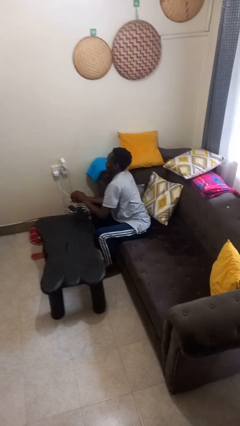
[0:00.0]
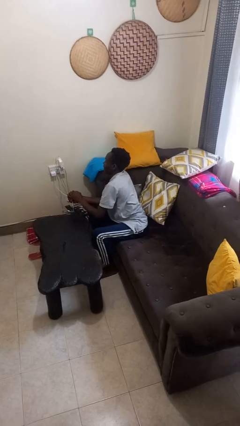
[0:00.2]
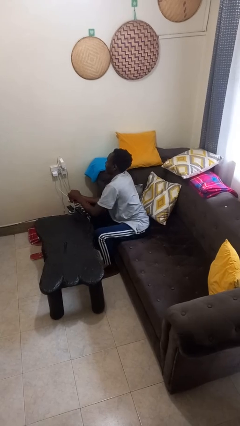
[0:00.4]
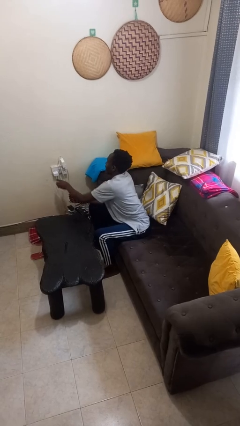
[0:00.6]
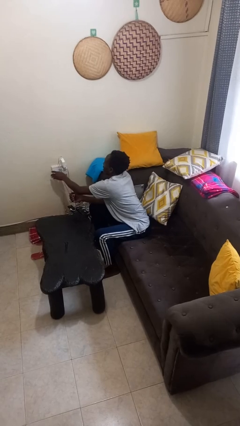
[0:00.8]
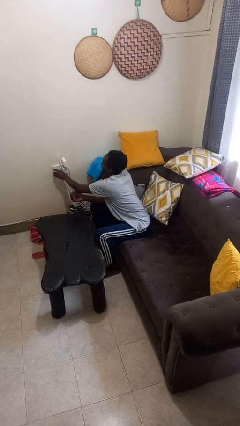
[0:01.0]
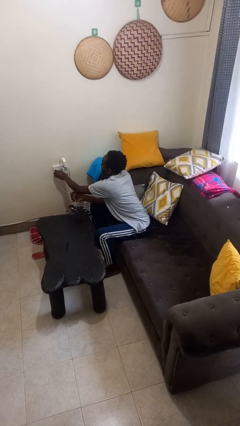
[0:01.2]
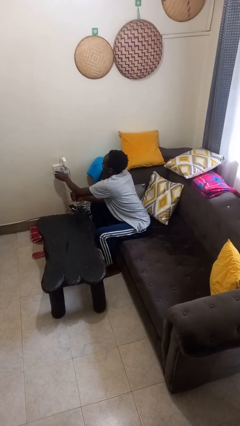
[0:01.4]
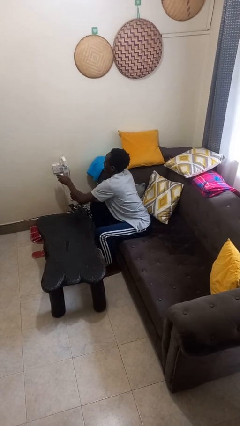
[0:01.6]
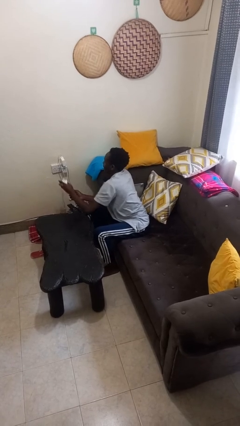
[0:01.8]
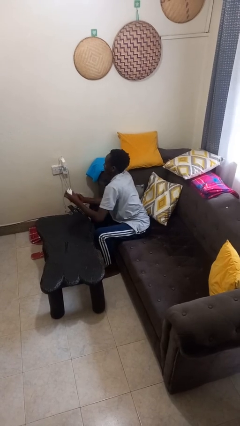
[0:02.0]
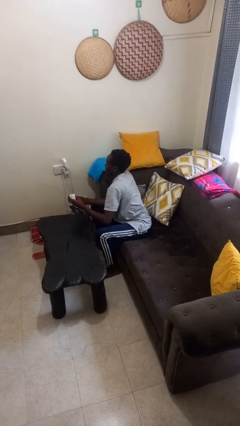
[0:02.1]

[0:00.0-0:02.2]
person unplugs from electrical socket

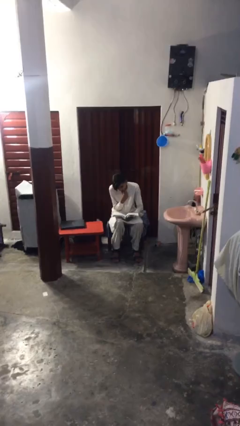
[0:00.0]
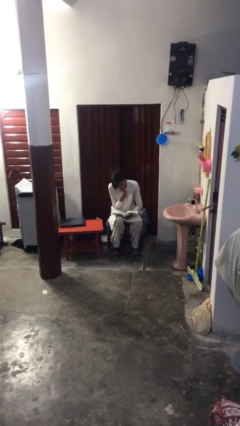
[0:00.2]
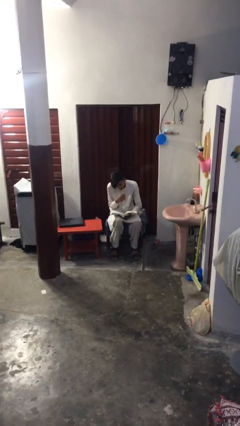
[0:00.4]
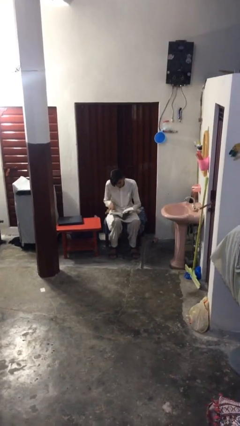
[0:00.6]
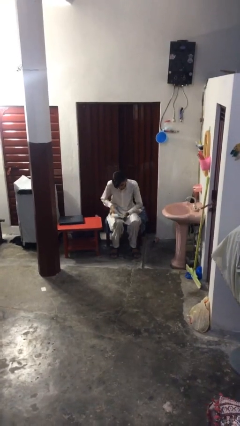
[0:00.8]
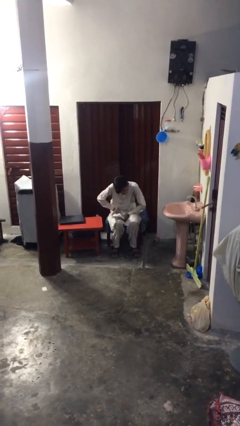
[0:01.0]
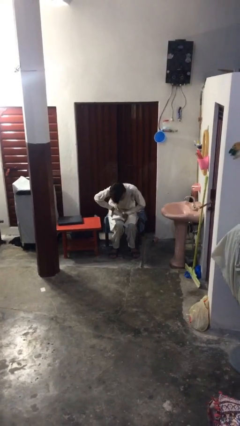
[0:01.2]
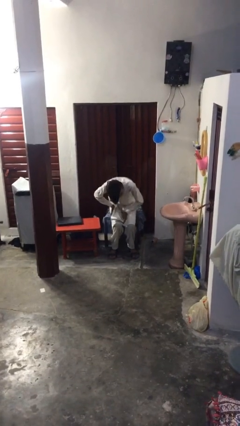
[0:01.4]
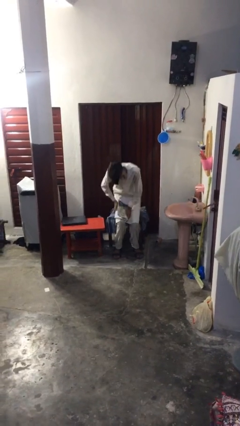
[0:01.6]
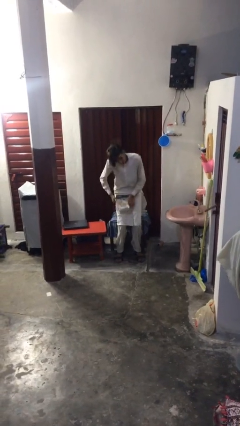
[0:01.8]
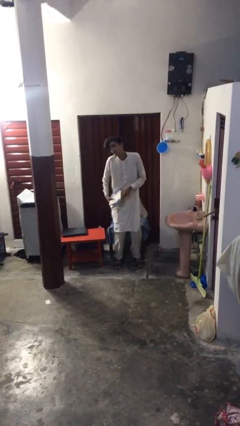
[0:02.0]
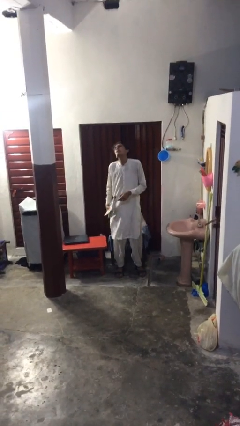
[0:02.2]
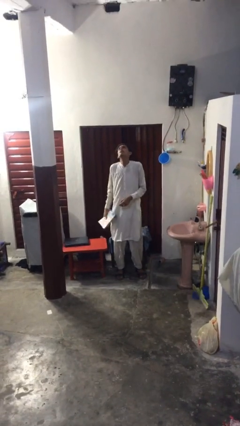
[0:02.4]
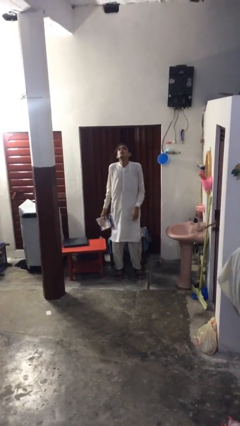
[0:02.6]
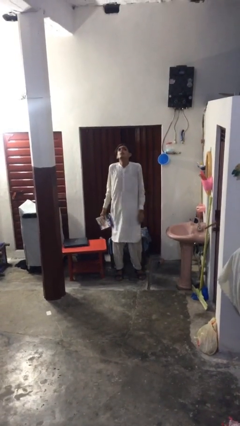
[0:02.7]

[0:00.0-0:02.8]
person stands up

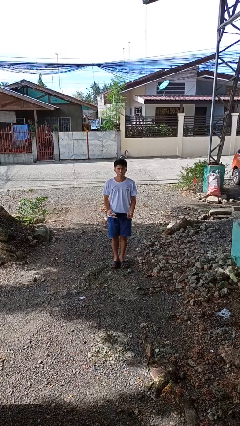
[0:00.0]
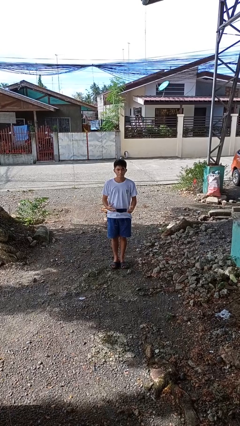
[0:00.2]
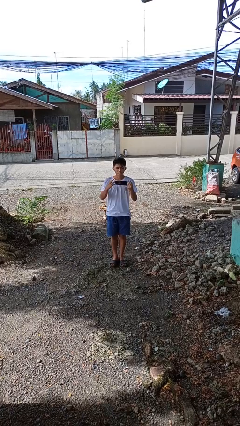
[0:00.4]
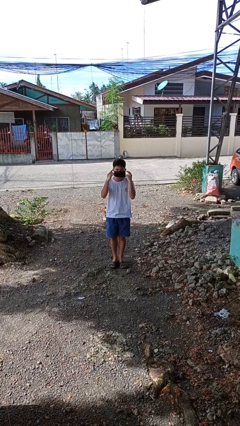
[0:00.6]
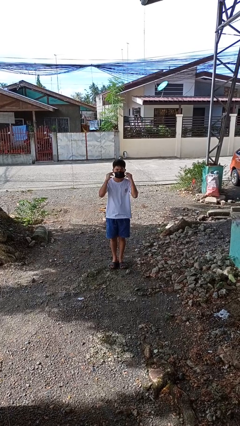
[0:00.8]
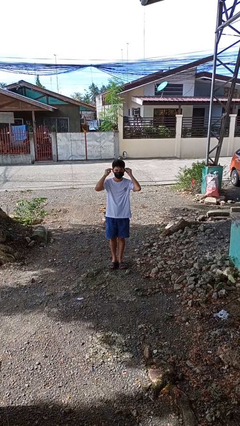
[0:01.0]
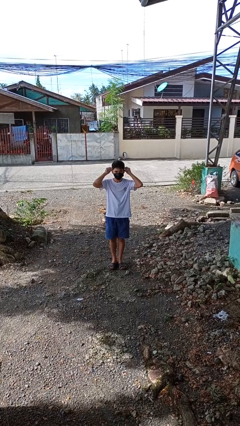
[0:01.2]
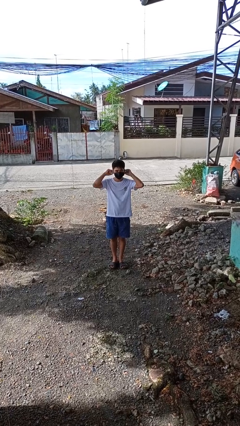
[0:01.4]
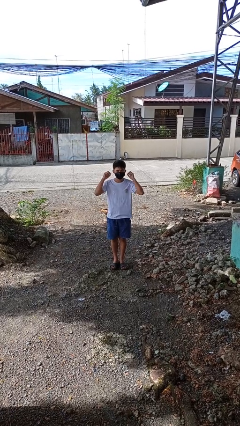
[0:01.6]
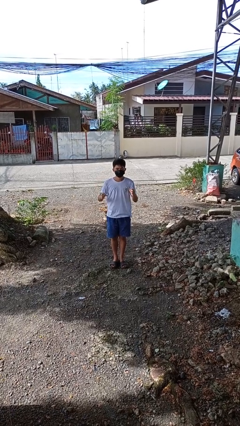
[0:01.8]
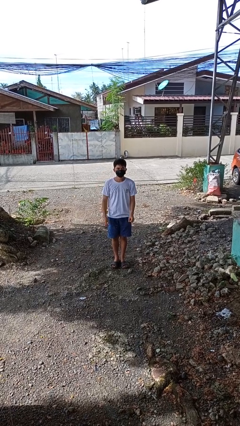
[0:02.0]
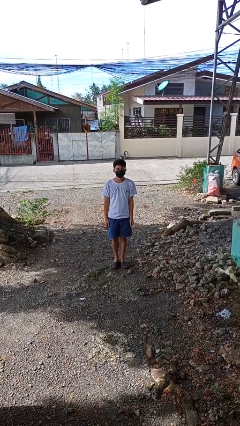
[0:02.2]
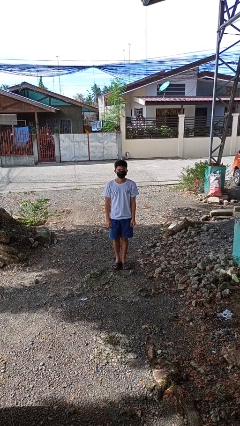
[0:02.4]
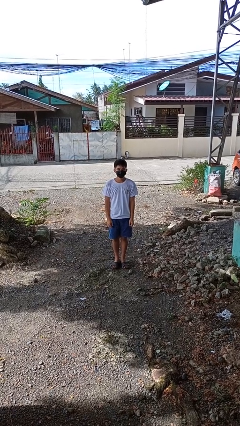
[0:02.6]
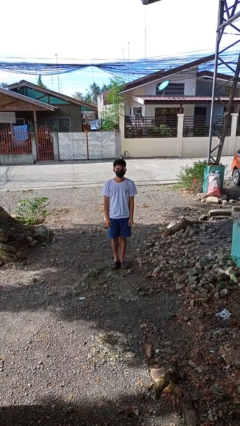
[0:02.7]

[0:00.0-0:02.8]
person puts on facemask

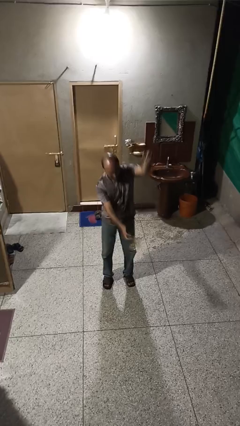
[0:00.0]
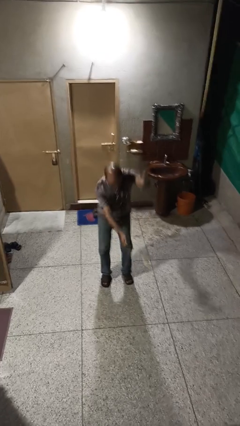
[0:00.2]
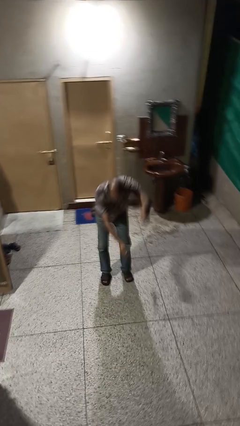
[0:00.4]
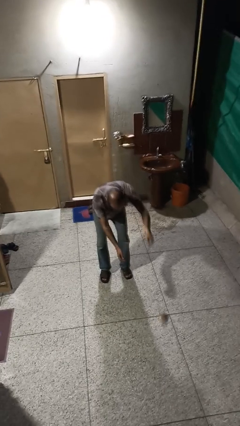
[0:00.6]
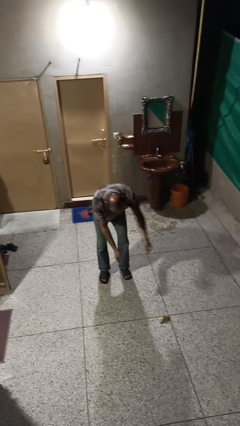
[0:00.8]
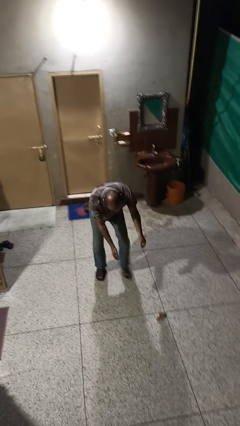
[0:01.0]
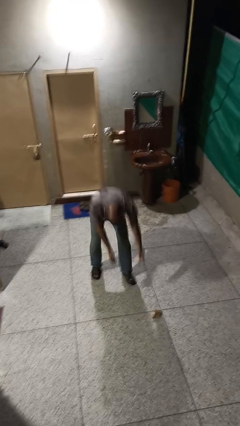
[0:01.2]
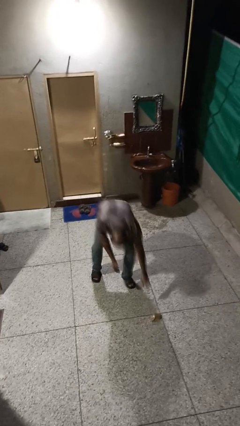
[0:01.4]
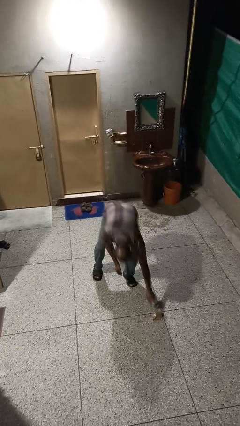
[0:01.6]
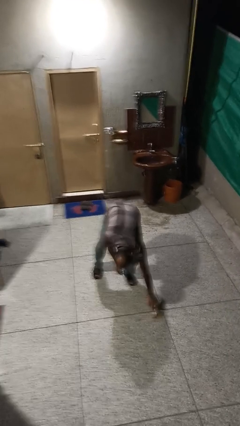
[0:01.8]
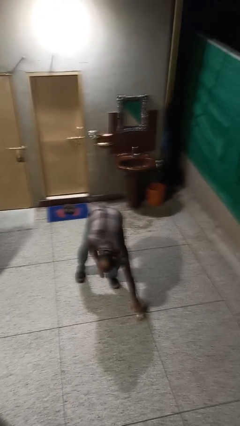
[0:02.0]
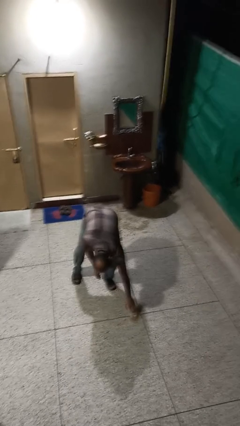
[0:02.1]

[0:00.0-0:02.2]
person catches dropped object

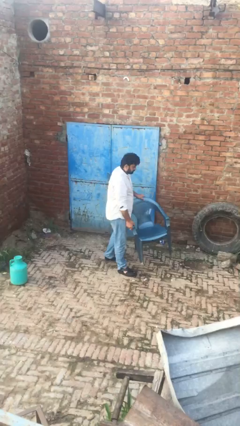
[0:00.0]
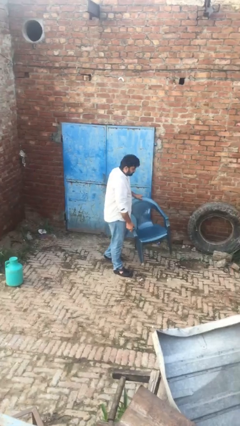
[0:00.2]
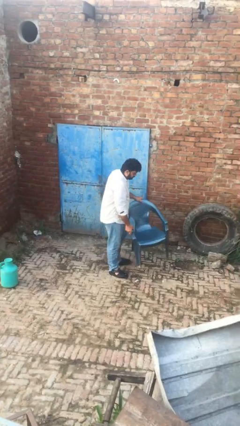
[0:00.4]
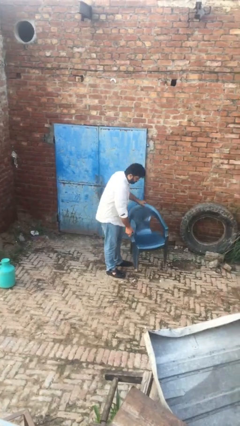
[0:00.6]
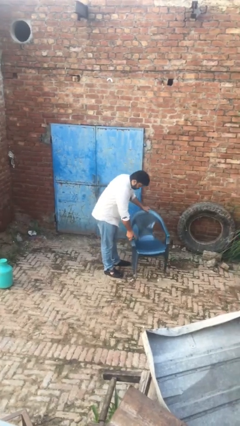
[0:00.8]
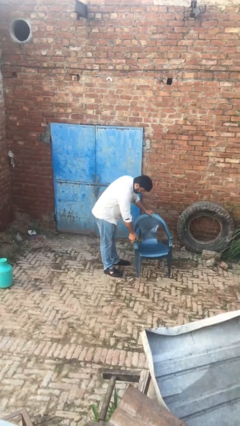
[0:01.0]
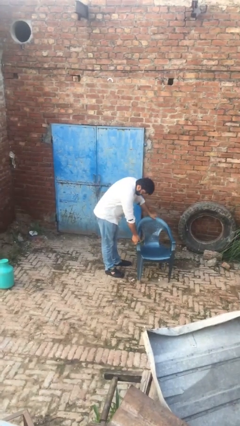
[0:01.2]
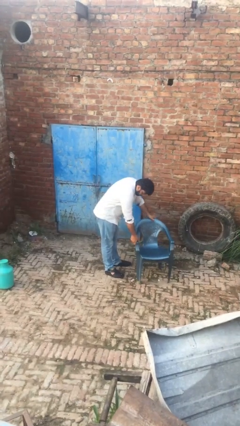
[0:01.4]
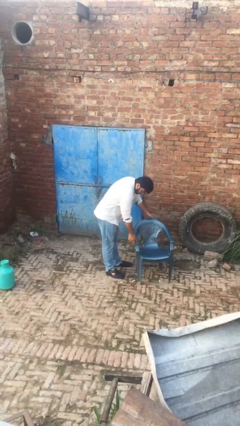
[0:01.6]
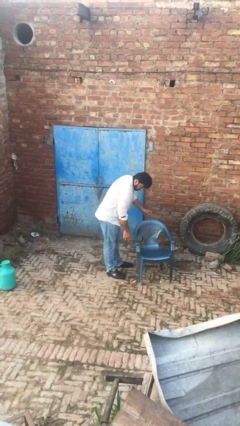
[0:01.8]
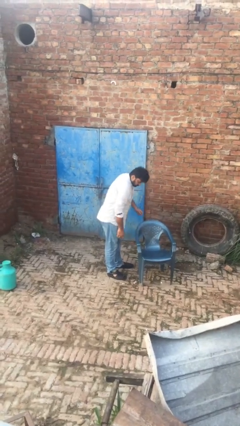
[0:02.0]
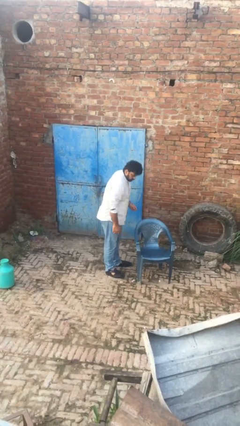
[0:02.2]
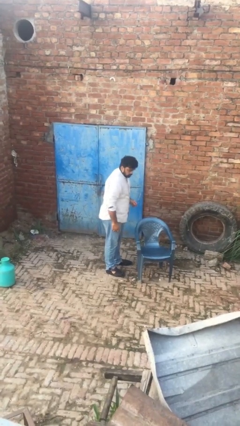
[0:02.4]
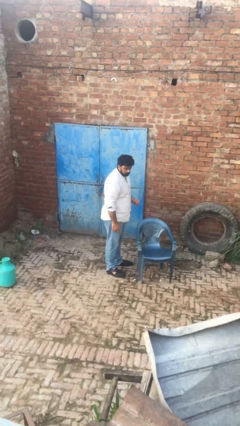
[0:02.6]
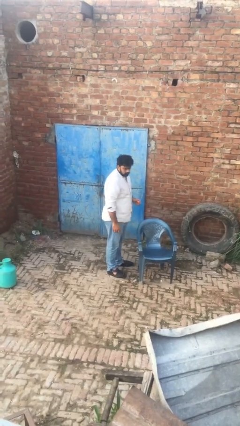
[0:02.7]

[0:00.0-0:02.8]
person puts down object on floor

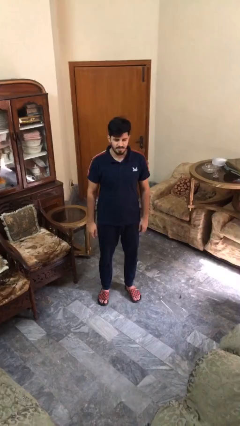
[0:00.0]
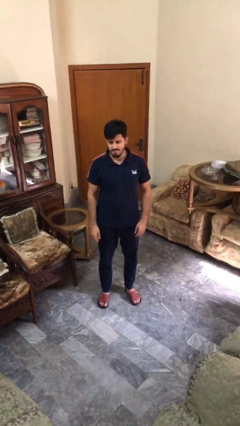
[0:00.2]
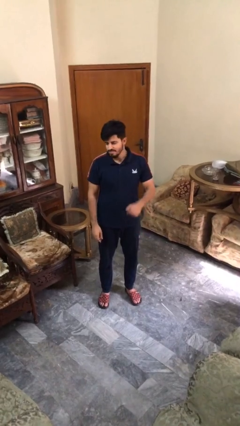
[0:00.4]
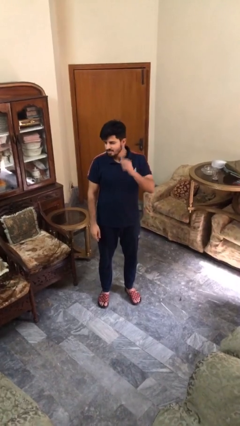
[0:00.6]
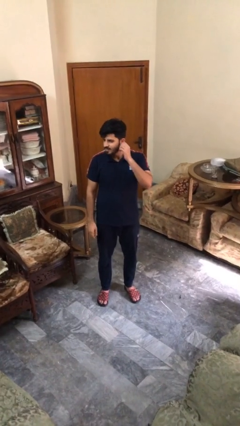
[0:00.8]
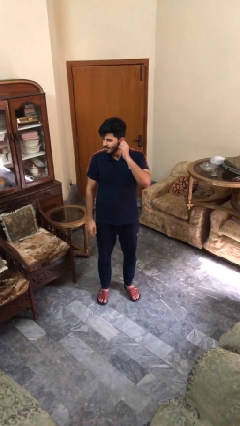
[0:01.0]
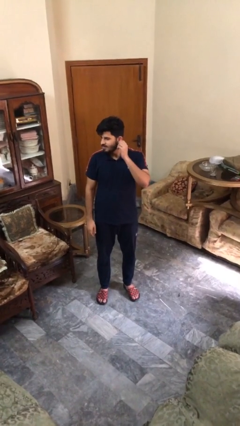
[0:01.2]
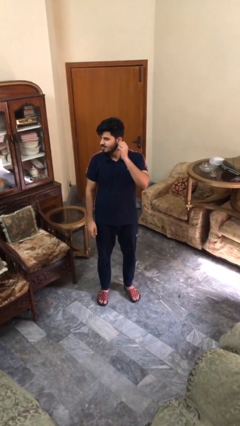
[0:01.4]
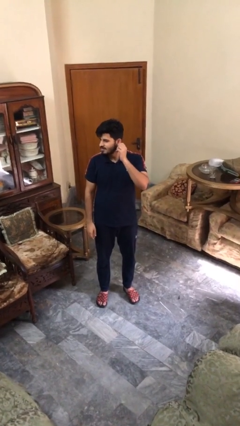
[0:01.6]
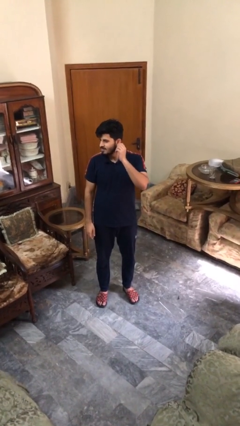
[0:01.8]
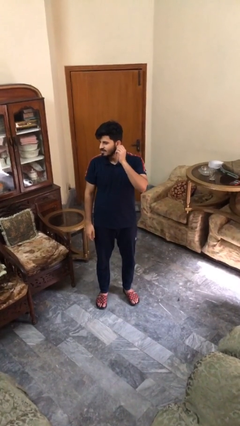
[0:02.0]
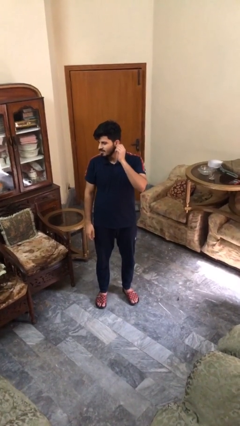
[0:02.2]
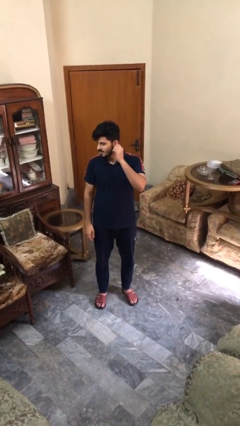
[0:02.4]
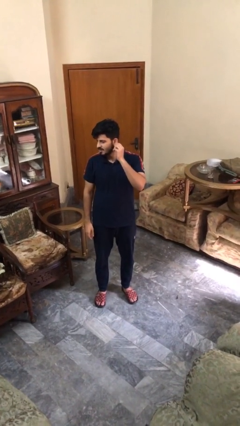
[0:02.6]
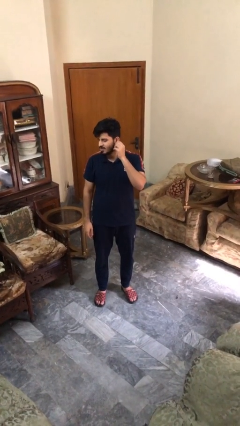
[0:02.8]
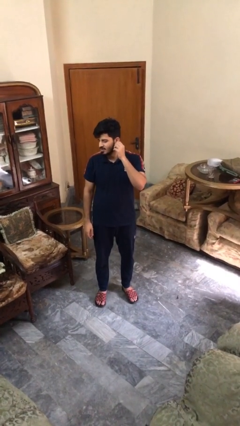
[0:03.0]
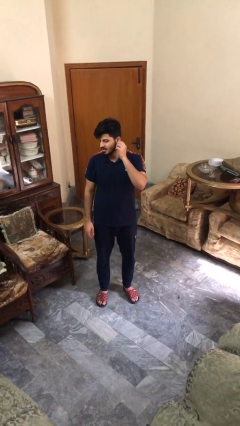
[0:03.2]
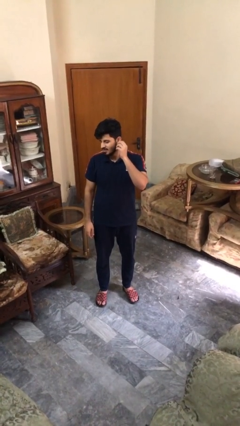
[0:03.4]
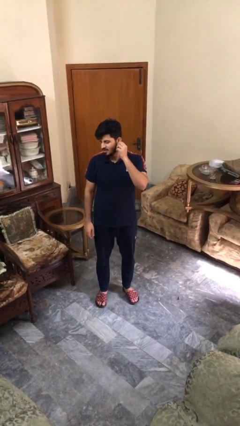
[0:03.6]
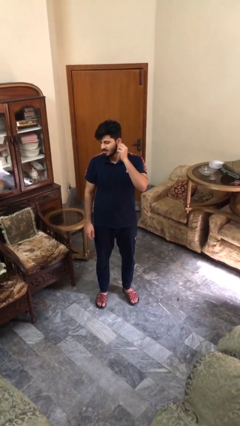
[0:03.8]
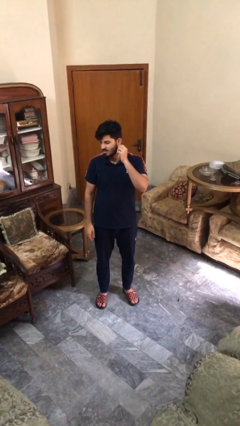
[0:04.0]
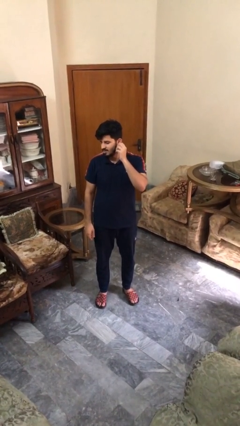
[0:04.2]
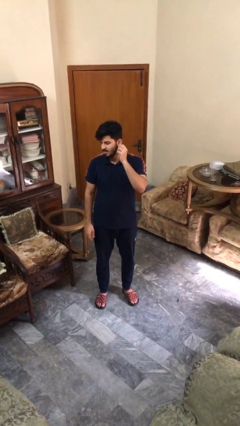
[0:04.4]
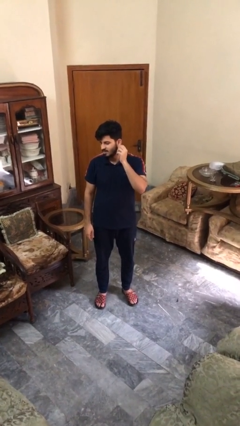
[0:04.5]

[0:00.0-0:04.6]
person touches earlobe
